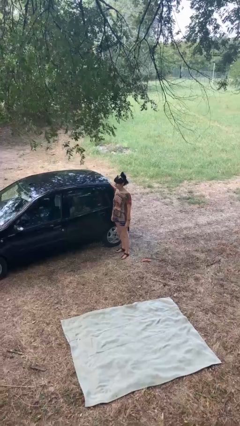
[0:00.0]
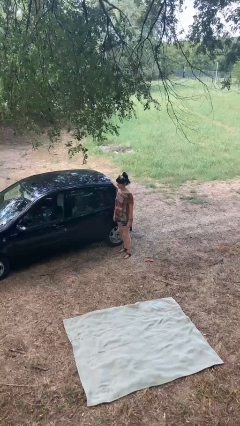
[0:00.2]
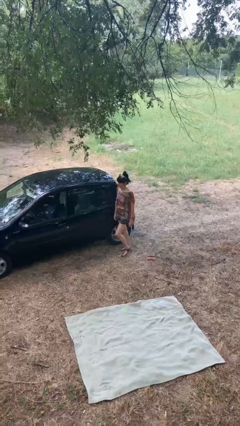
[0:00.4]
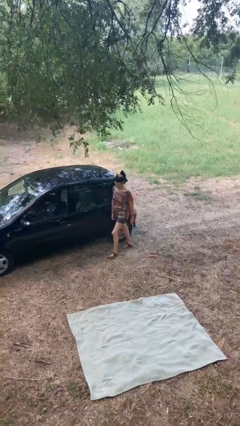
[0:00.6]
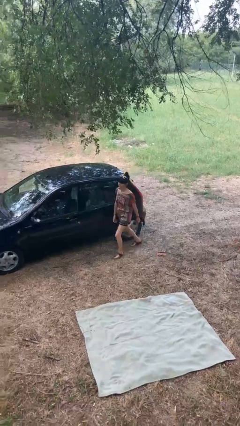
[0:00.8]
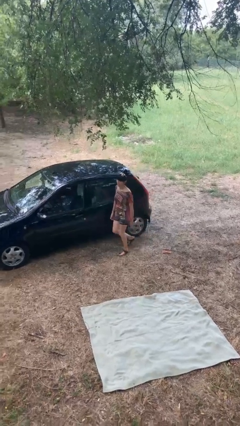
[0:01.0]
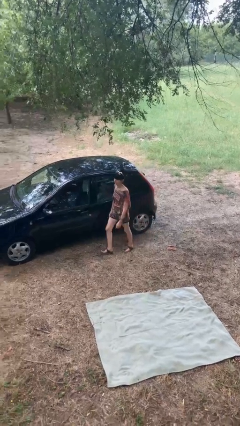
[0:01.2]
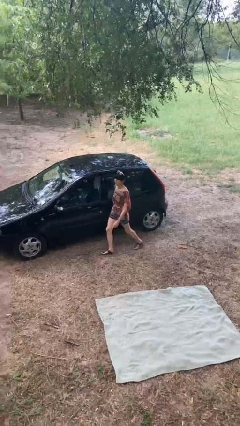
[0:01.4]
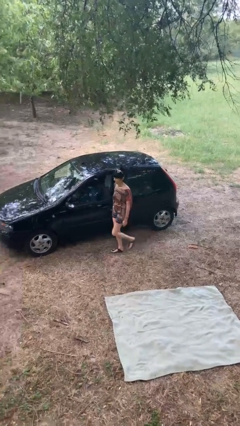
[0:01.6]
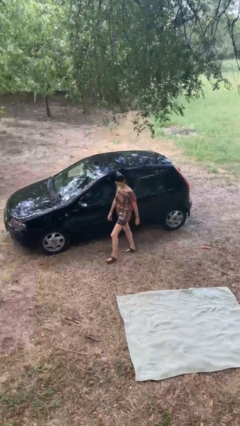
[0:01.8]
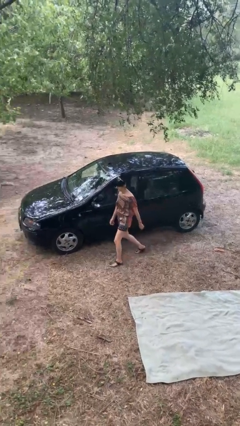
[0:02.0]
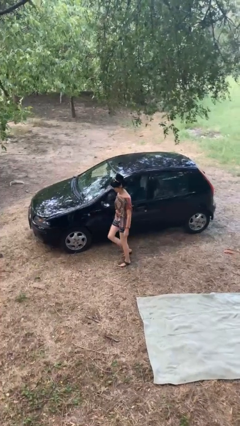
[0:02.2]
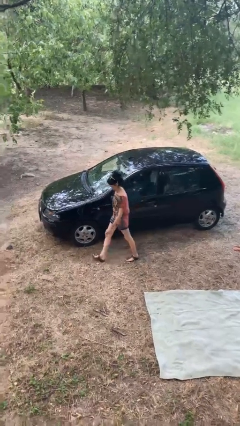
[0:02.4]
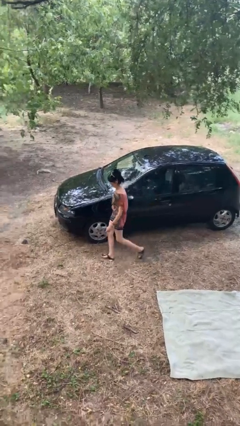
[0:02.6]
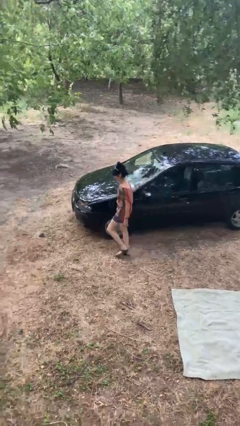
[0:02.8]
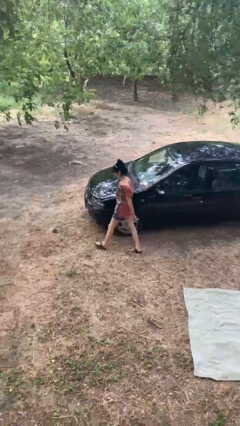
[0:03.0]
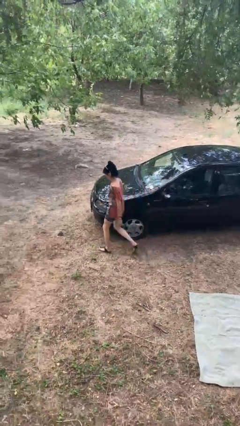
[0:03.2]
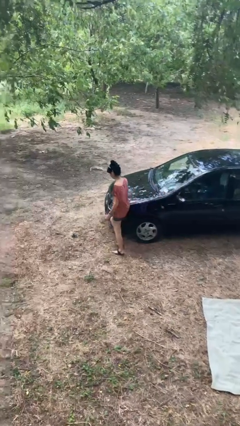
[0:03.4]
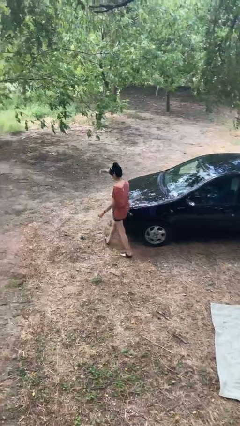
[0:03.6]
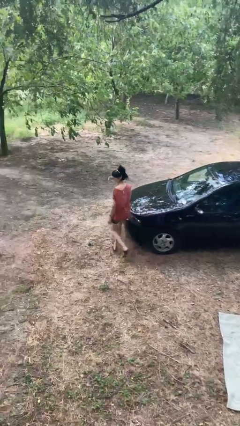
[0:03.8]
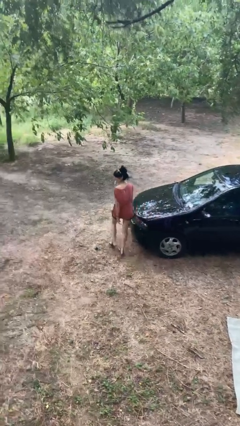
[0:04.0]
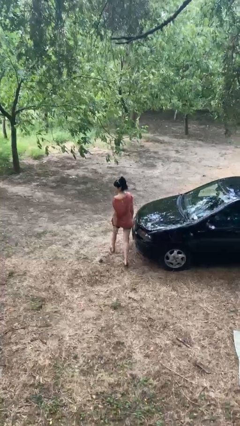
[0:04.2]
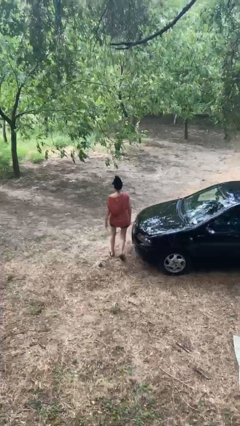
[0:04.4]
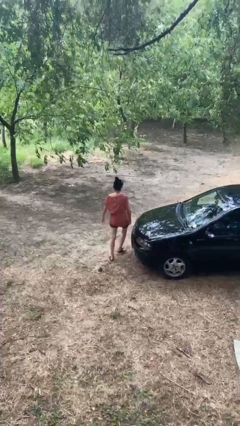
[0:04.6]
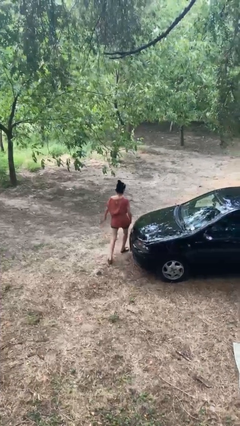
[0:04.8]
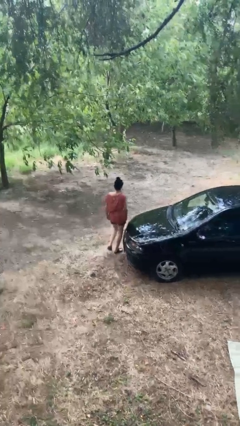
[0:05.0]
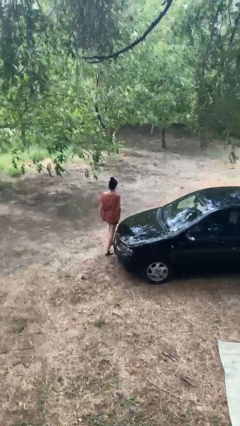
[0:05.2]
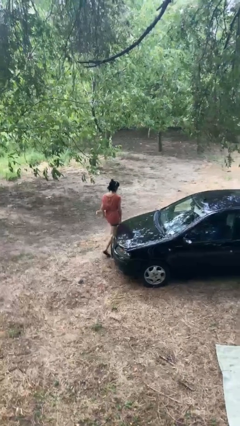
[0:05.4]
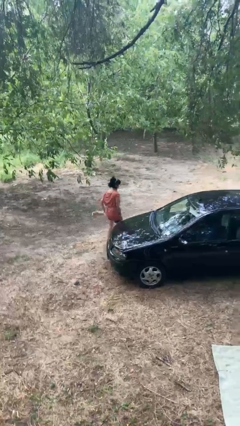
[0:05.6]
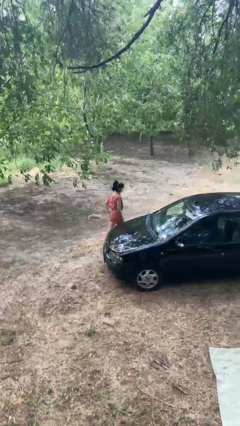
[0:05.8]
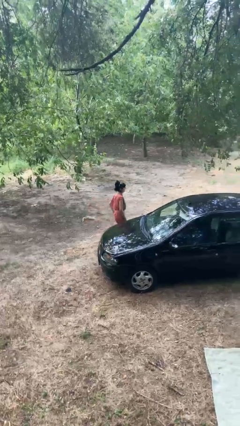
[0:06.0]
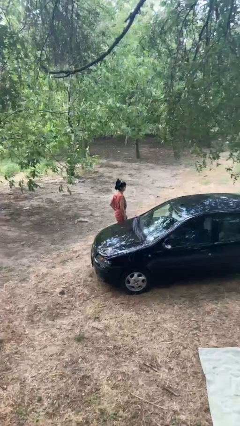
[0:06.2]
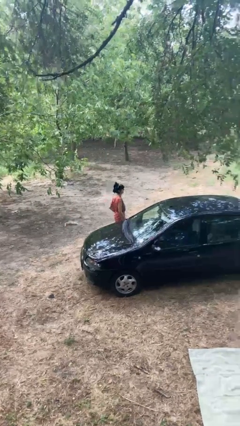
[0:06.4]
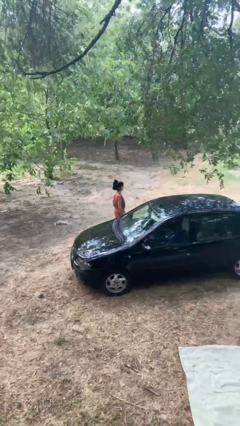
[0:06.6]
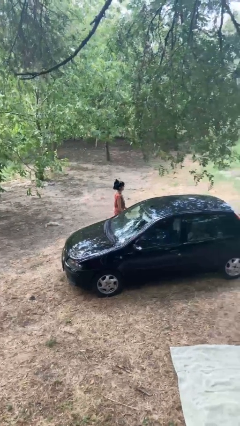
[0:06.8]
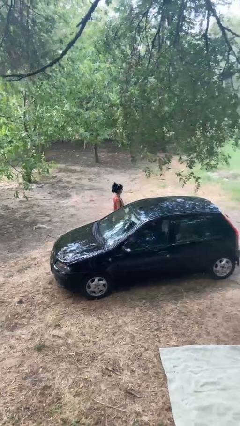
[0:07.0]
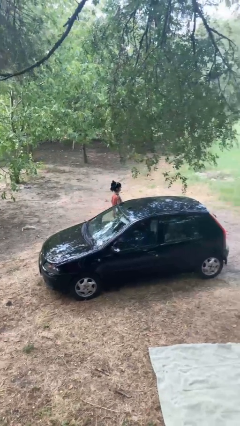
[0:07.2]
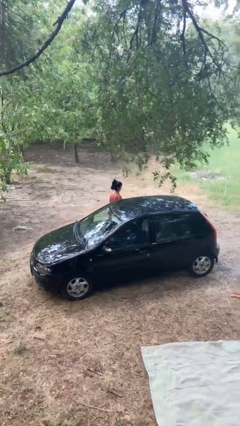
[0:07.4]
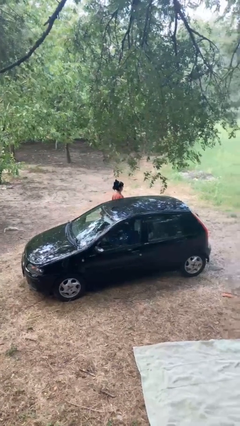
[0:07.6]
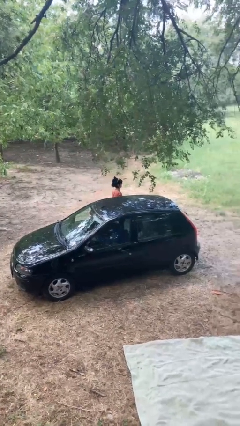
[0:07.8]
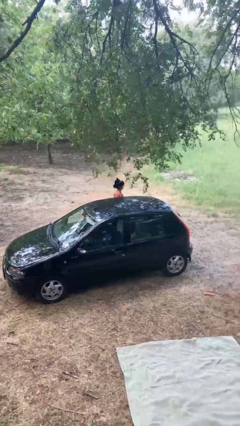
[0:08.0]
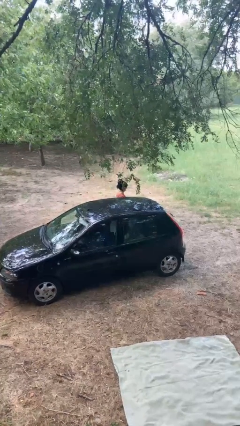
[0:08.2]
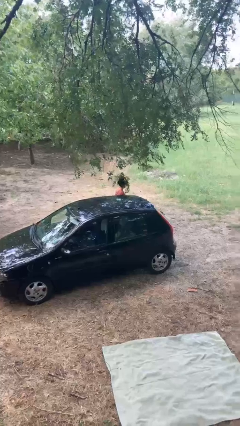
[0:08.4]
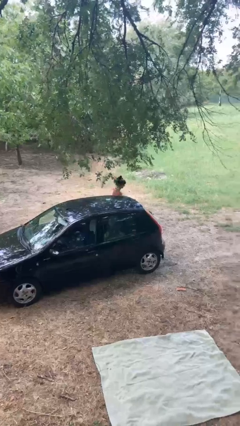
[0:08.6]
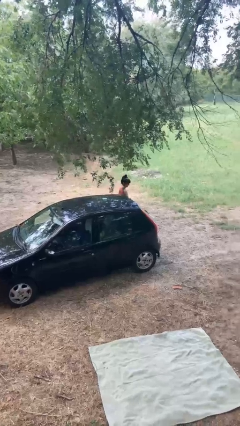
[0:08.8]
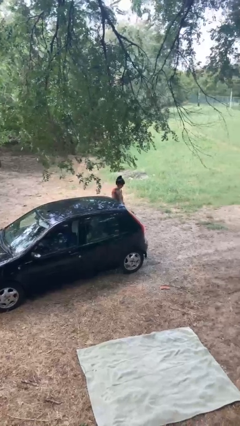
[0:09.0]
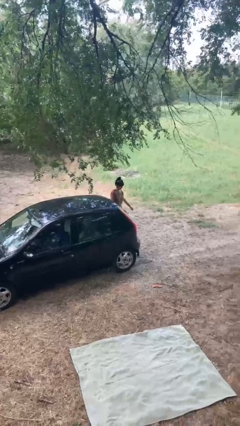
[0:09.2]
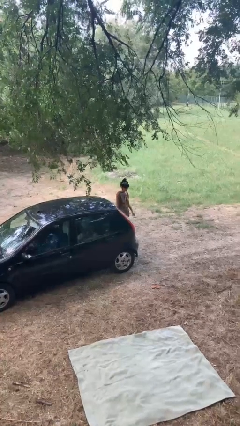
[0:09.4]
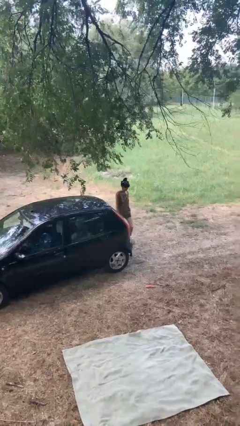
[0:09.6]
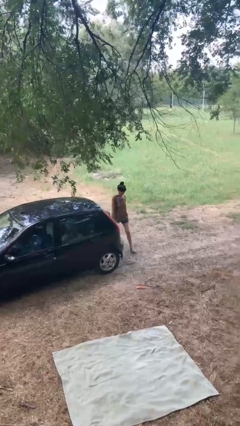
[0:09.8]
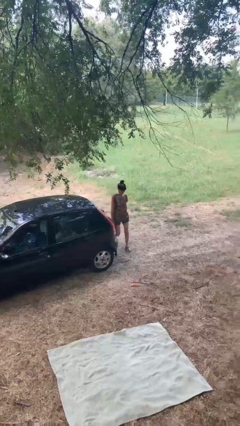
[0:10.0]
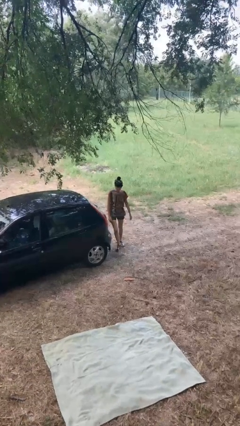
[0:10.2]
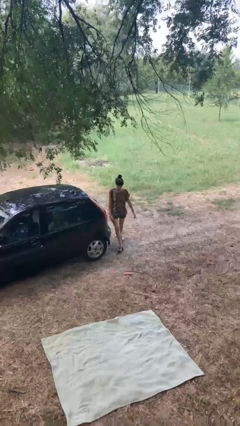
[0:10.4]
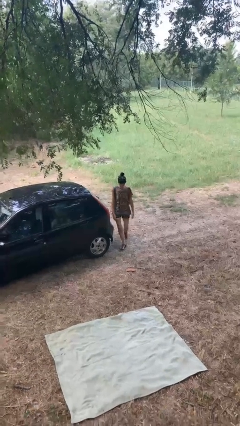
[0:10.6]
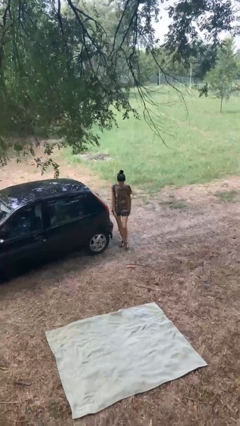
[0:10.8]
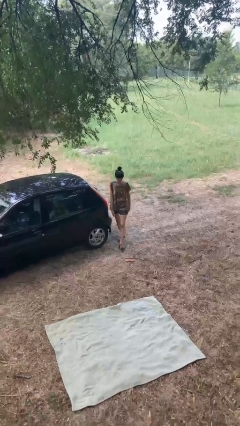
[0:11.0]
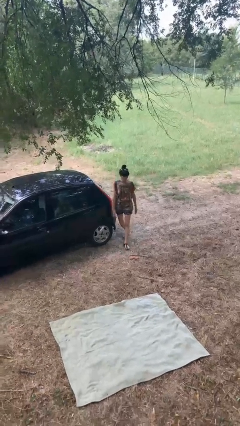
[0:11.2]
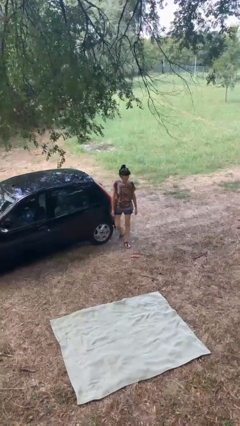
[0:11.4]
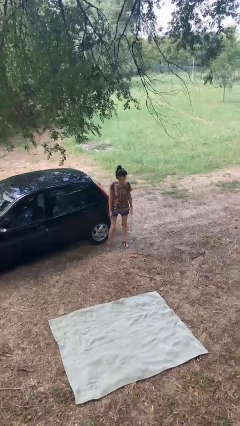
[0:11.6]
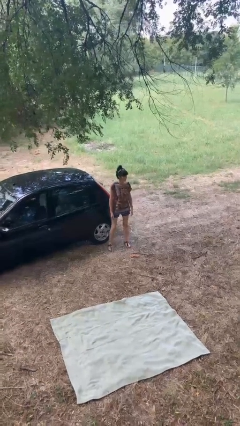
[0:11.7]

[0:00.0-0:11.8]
person walks around car

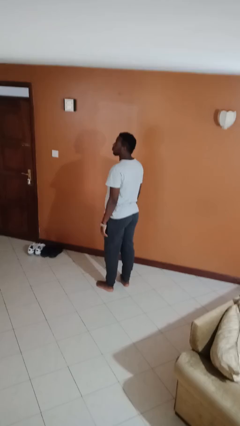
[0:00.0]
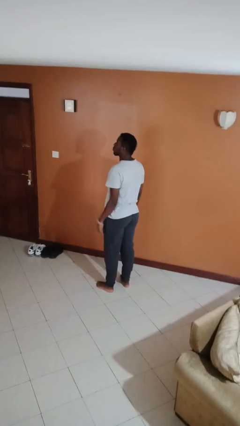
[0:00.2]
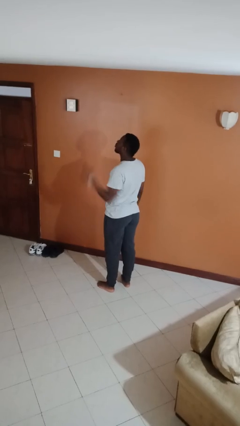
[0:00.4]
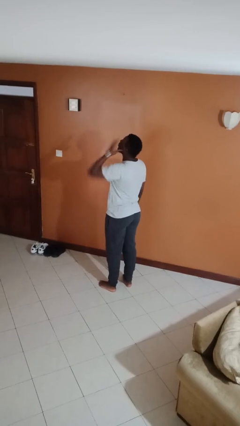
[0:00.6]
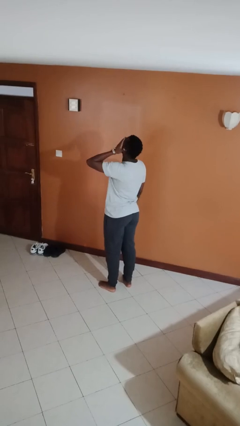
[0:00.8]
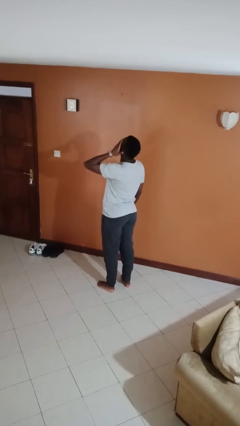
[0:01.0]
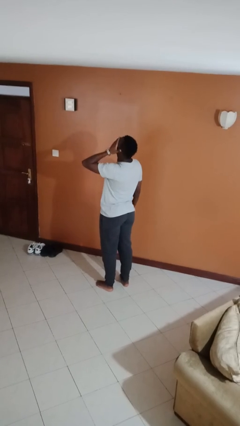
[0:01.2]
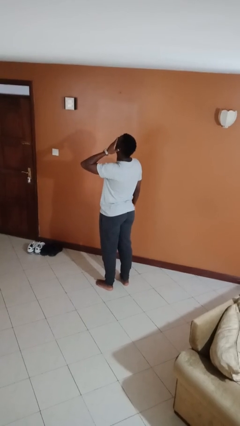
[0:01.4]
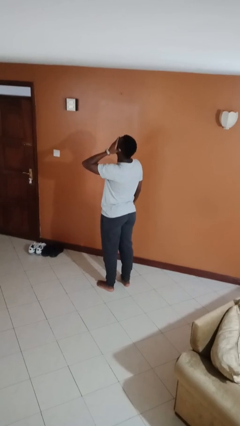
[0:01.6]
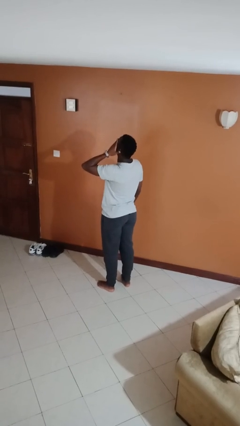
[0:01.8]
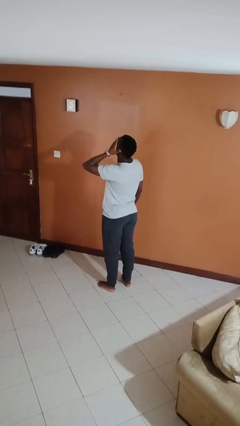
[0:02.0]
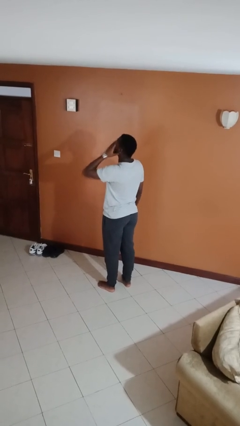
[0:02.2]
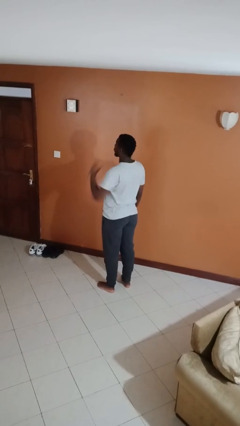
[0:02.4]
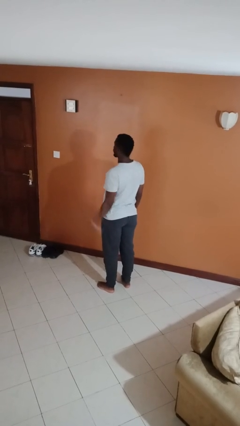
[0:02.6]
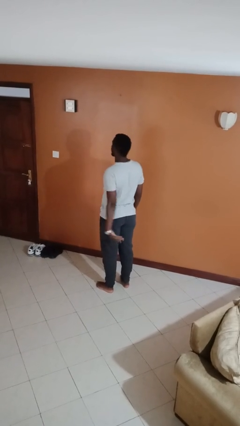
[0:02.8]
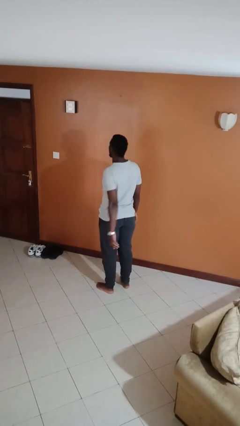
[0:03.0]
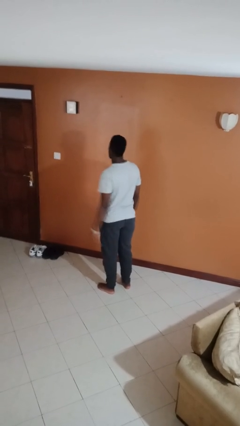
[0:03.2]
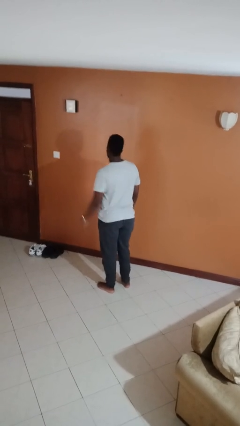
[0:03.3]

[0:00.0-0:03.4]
person rubs eyes

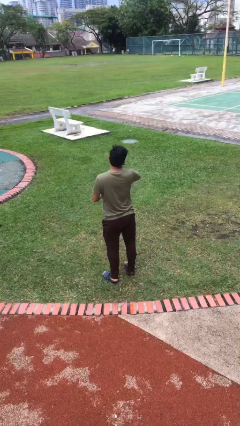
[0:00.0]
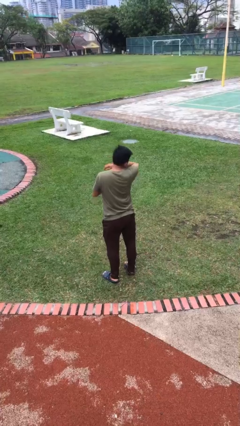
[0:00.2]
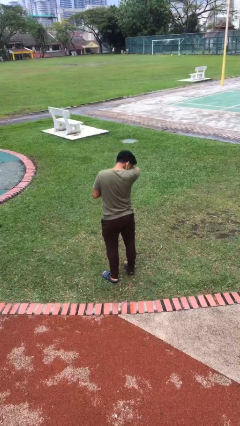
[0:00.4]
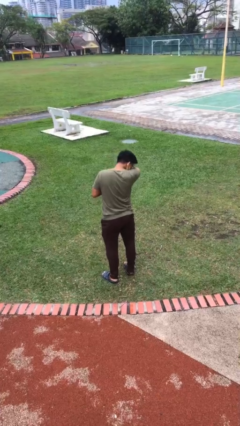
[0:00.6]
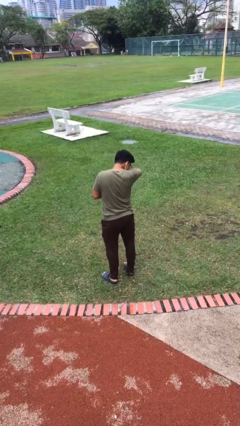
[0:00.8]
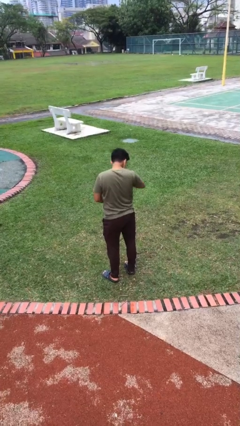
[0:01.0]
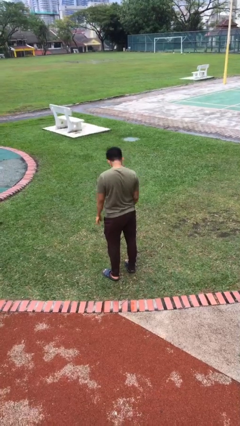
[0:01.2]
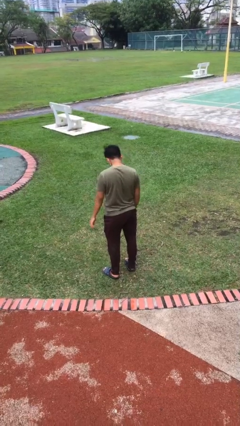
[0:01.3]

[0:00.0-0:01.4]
person sneezes into arm

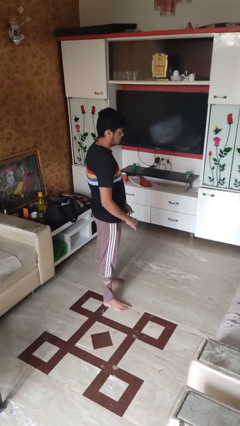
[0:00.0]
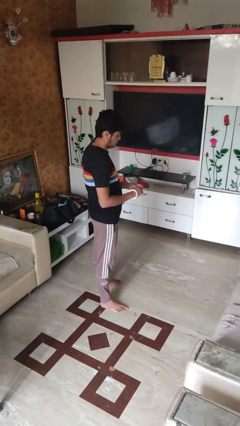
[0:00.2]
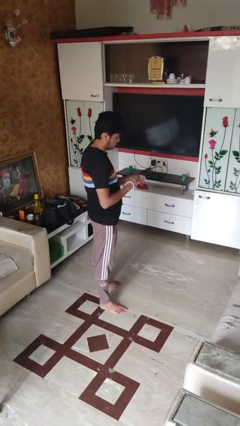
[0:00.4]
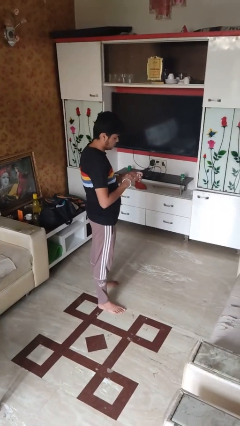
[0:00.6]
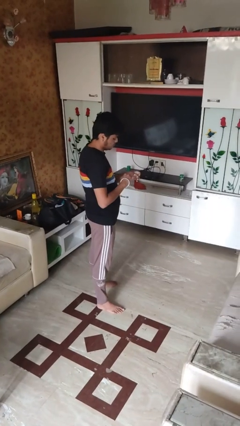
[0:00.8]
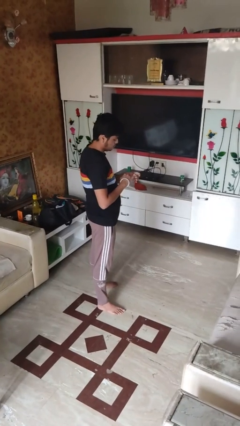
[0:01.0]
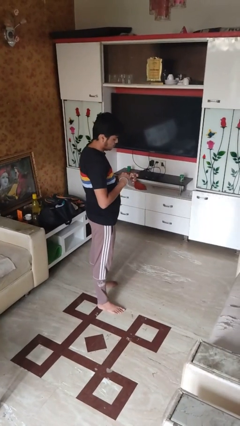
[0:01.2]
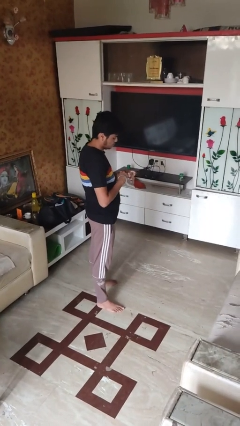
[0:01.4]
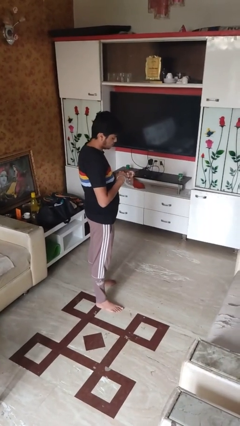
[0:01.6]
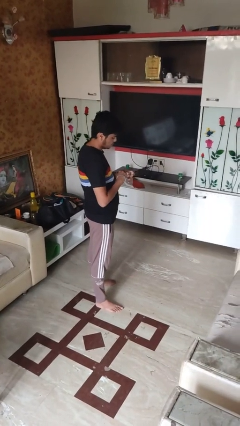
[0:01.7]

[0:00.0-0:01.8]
person puts on ring
